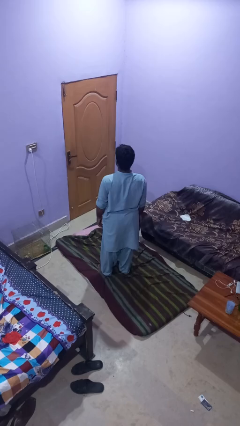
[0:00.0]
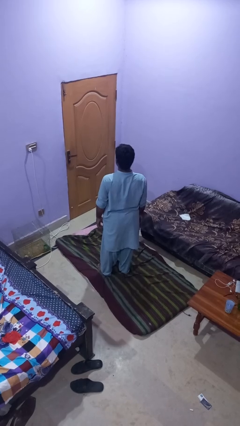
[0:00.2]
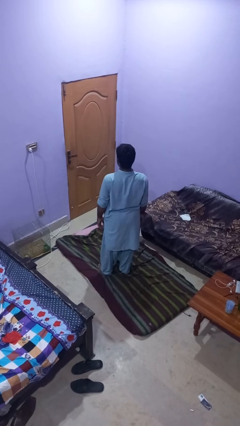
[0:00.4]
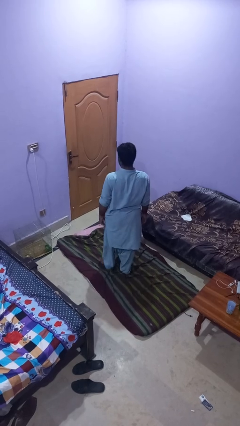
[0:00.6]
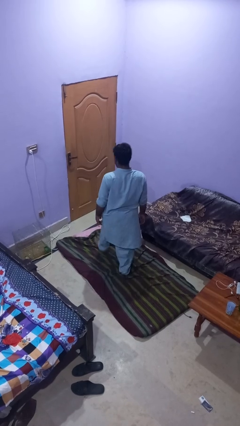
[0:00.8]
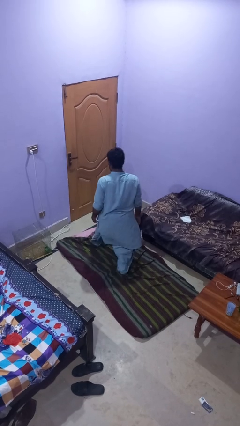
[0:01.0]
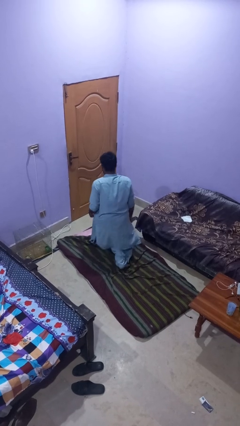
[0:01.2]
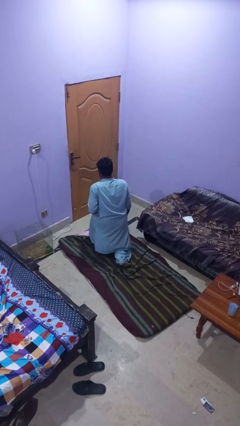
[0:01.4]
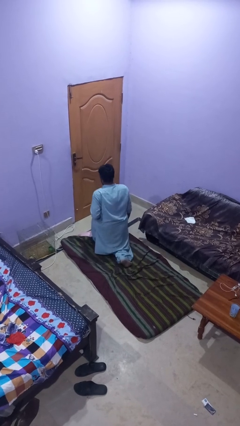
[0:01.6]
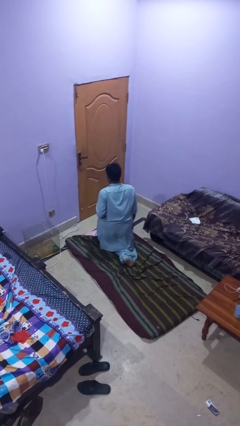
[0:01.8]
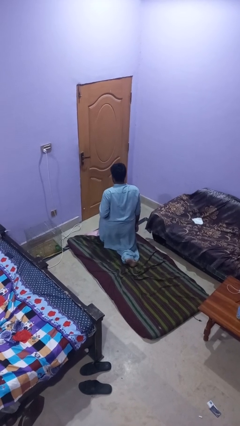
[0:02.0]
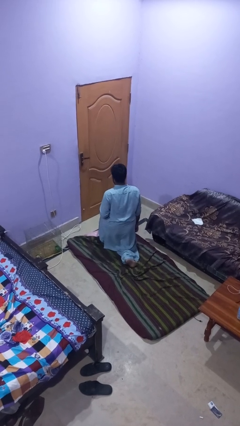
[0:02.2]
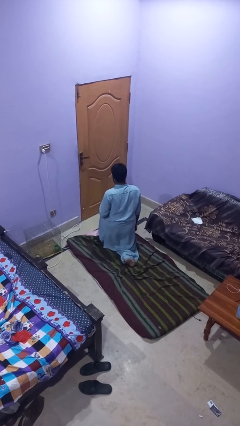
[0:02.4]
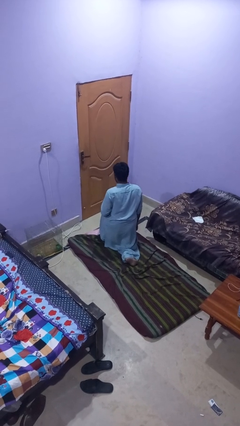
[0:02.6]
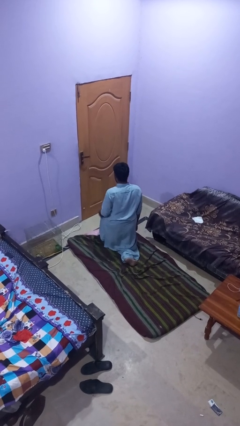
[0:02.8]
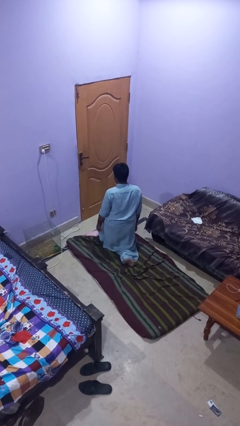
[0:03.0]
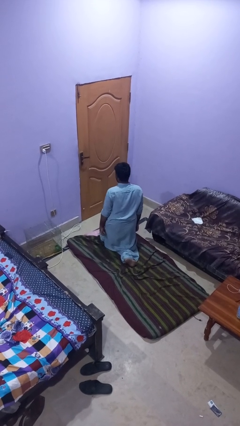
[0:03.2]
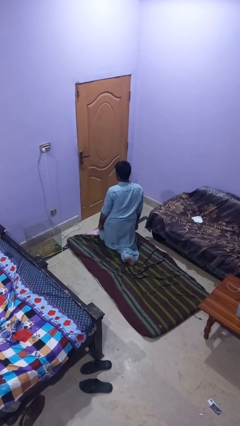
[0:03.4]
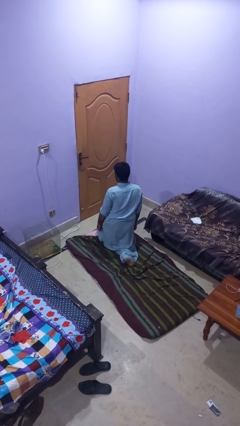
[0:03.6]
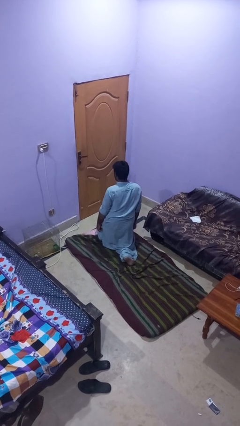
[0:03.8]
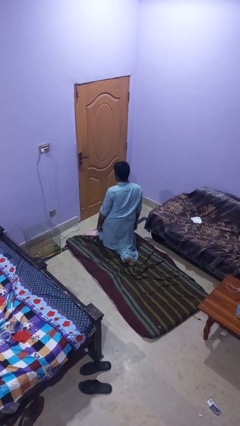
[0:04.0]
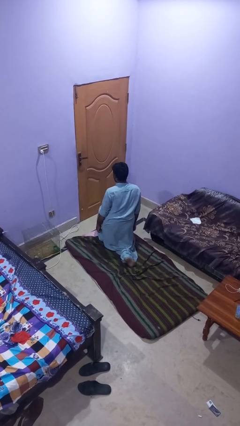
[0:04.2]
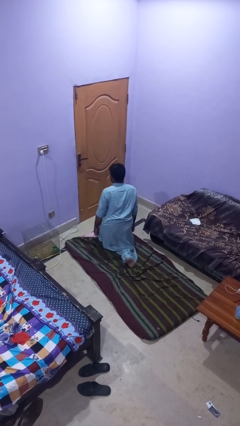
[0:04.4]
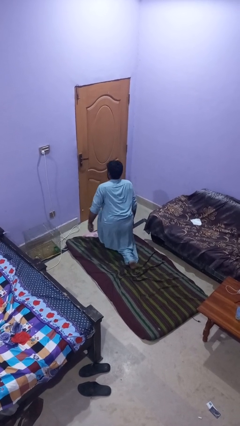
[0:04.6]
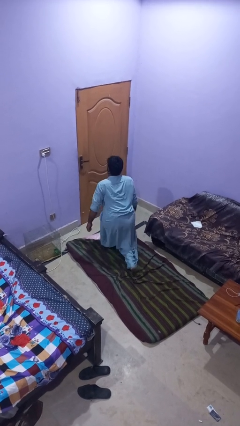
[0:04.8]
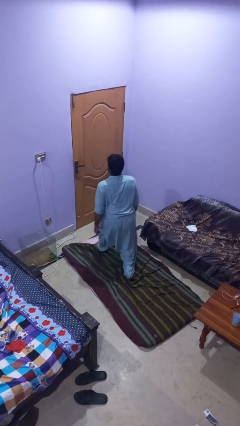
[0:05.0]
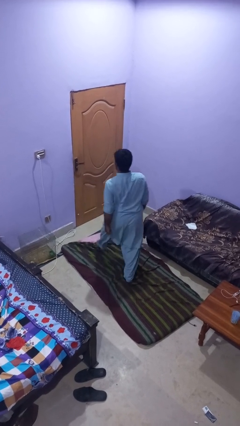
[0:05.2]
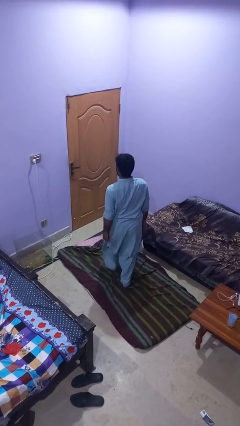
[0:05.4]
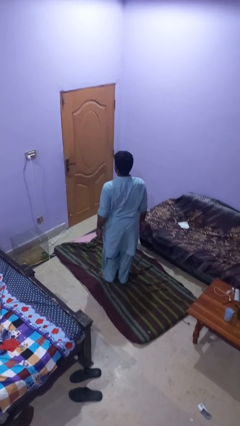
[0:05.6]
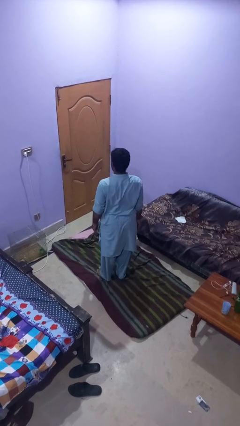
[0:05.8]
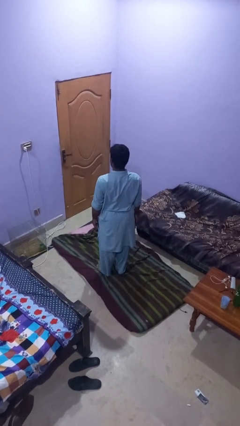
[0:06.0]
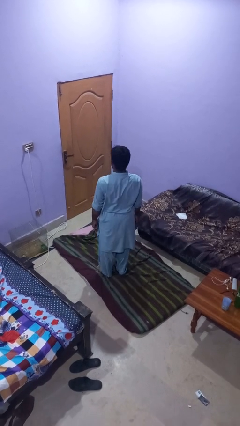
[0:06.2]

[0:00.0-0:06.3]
person exercises with lunges

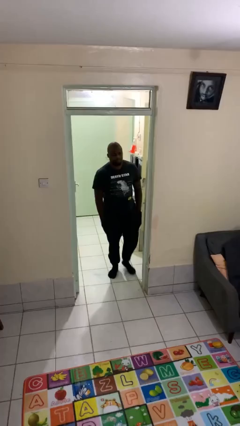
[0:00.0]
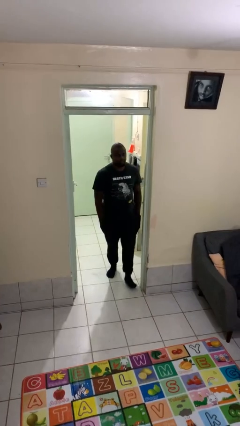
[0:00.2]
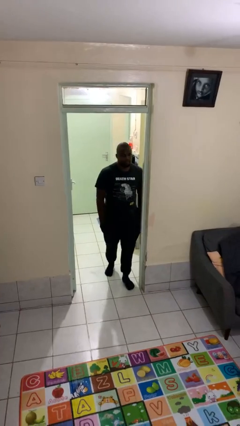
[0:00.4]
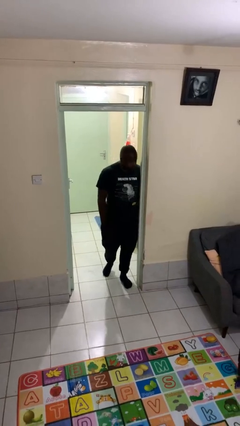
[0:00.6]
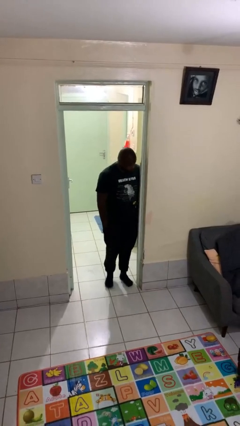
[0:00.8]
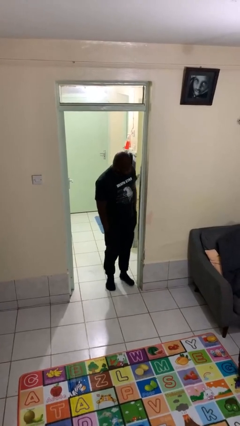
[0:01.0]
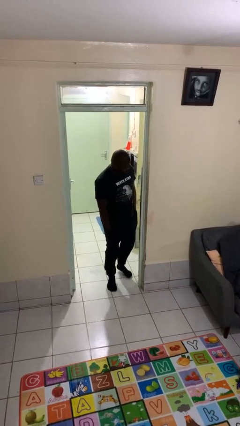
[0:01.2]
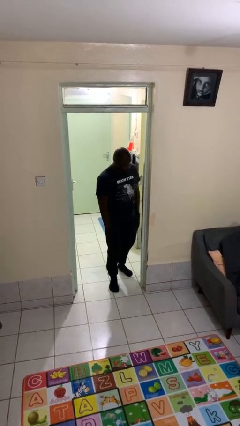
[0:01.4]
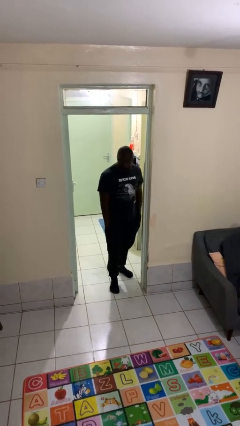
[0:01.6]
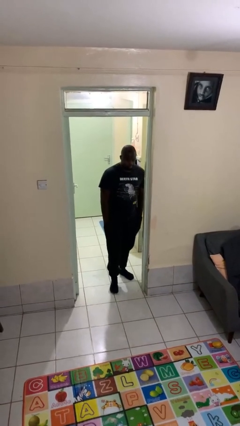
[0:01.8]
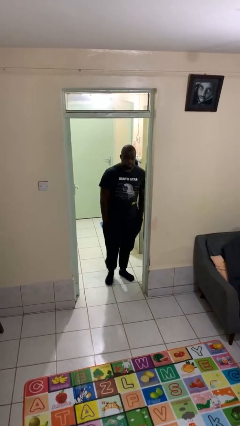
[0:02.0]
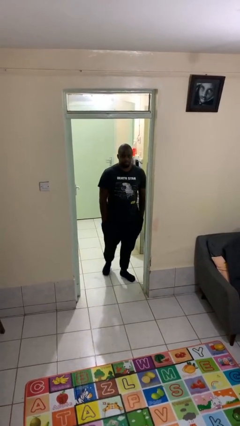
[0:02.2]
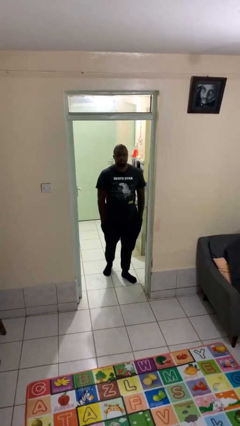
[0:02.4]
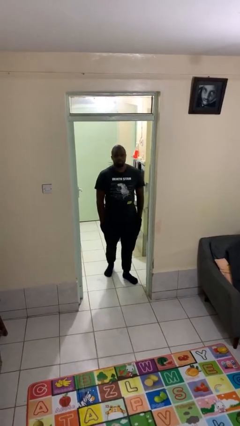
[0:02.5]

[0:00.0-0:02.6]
person bumps into wall

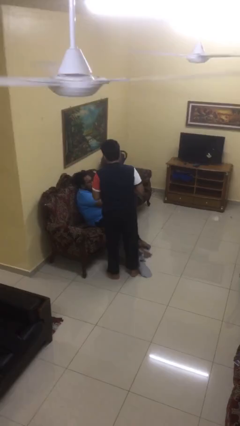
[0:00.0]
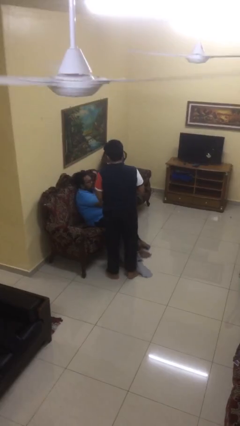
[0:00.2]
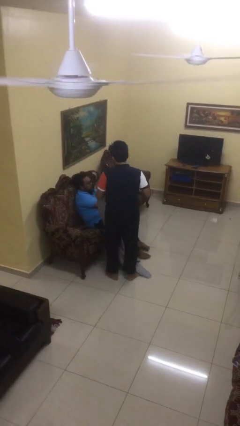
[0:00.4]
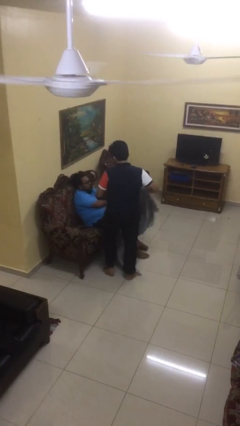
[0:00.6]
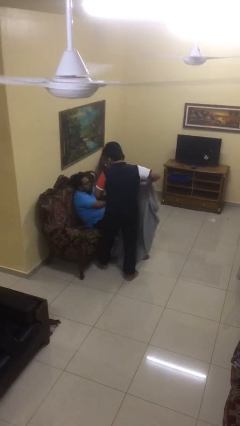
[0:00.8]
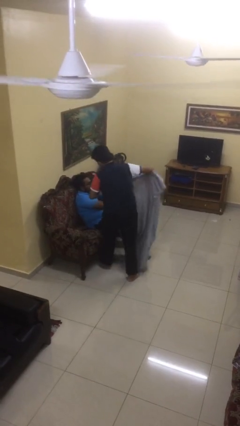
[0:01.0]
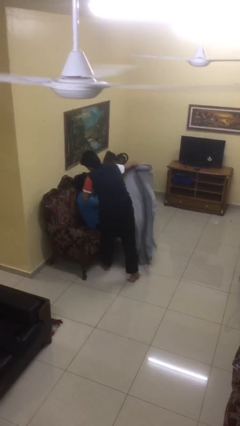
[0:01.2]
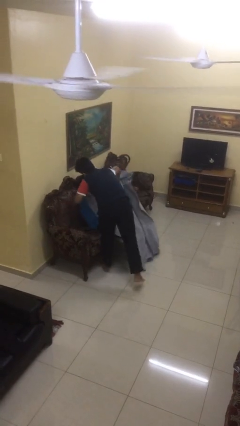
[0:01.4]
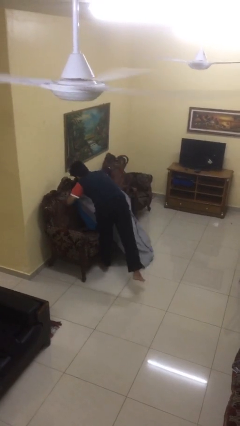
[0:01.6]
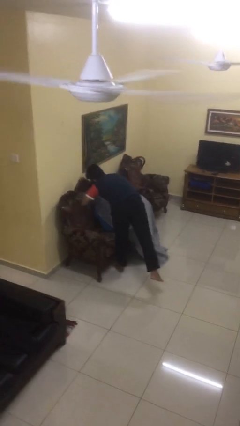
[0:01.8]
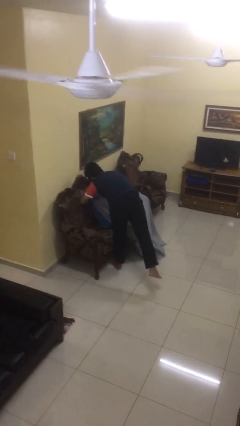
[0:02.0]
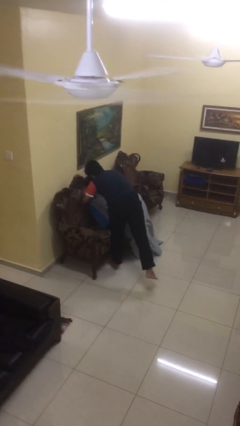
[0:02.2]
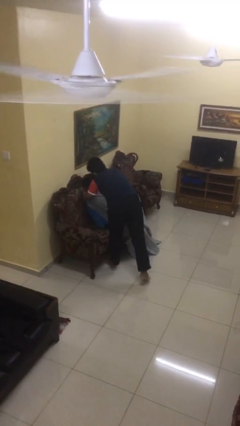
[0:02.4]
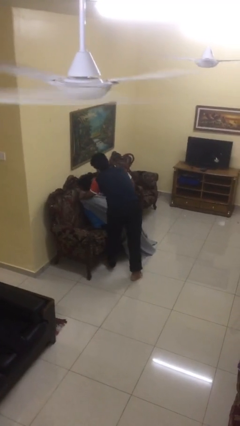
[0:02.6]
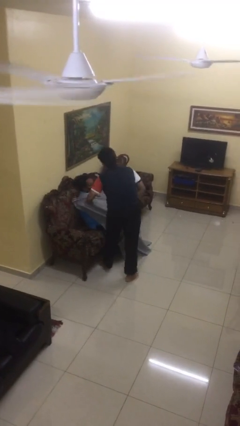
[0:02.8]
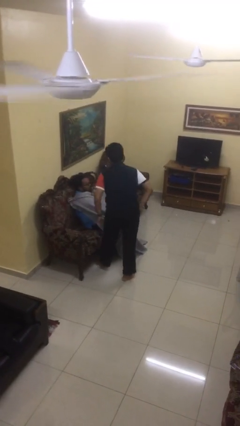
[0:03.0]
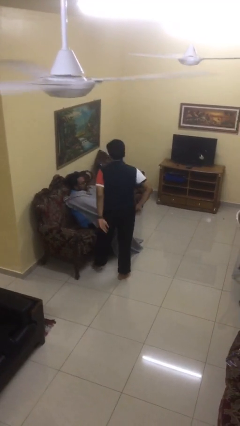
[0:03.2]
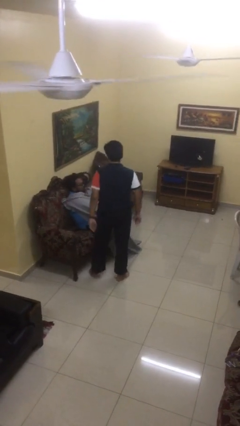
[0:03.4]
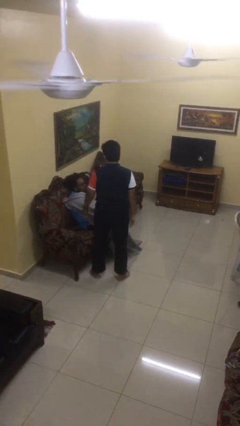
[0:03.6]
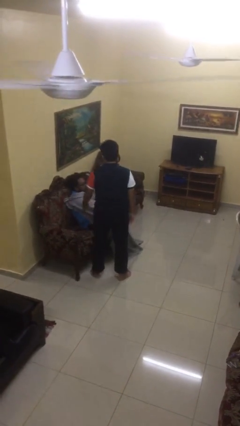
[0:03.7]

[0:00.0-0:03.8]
person covers friend with blanket

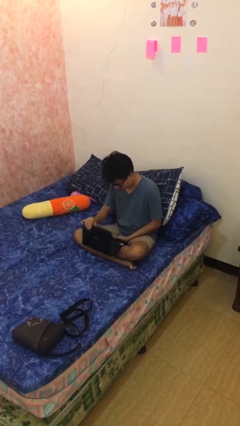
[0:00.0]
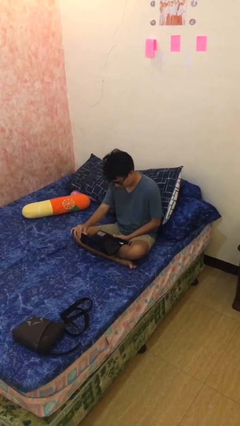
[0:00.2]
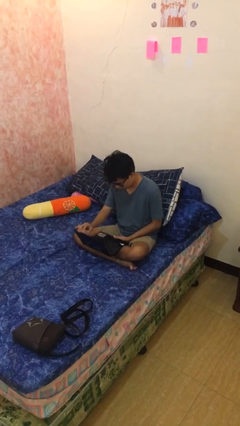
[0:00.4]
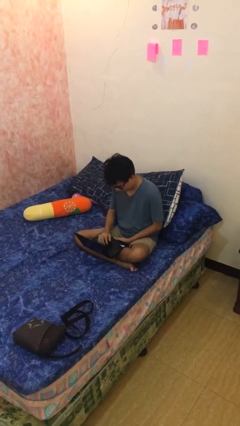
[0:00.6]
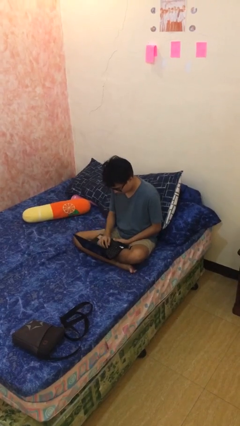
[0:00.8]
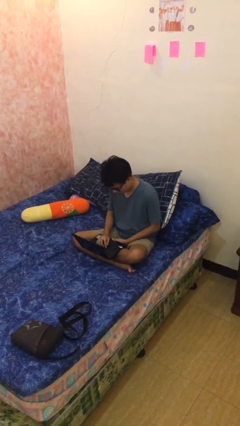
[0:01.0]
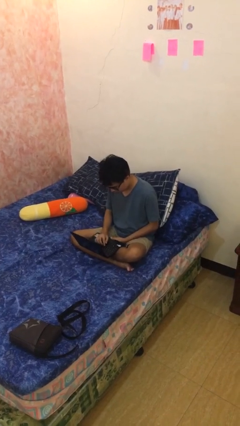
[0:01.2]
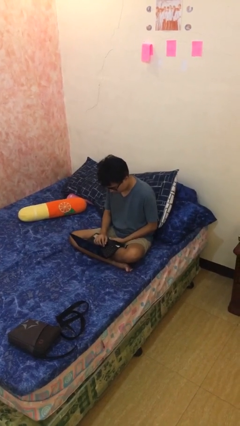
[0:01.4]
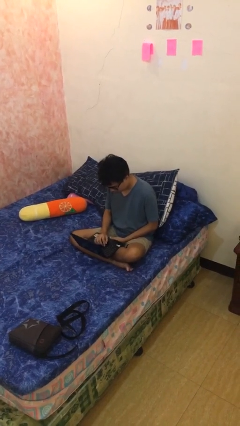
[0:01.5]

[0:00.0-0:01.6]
person interacts with laptop

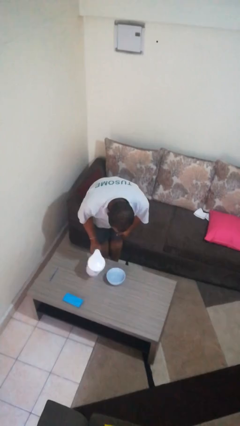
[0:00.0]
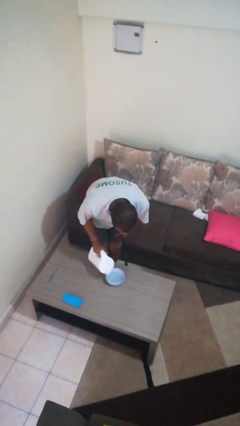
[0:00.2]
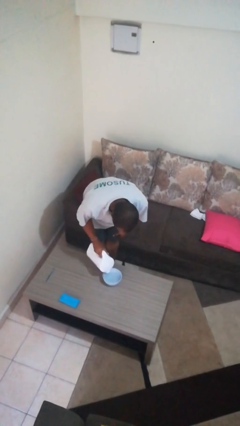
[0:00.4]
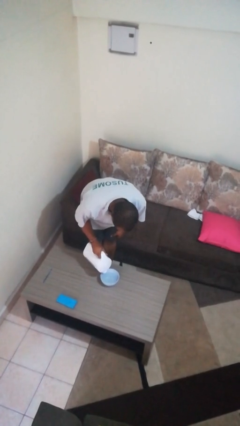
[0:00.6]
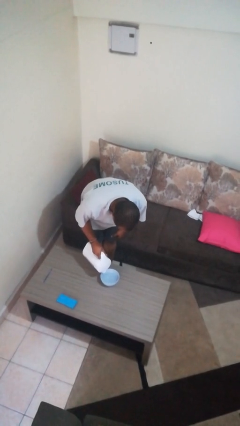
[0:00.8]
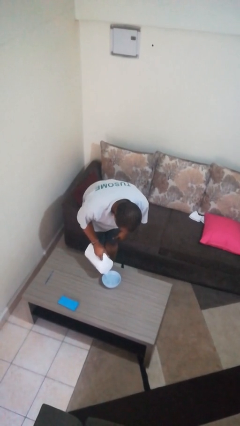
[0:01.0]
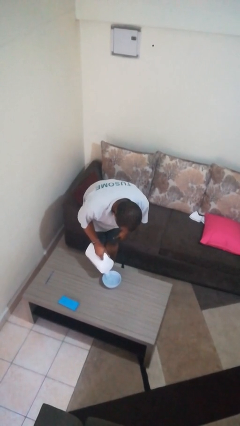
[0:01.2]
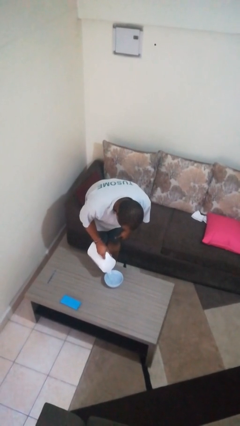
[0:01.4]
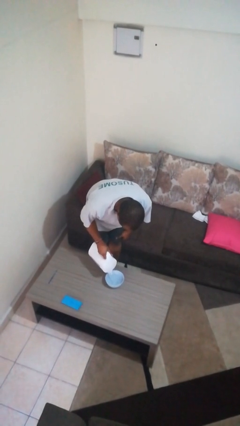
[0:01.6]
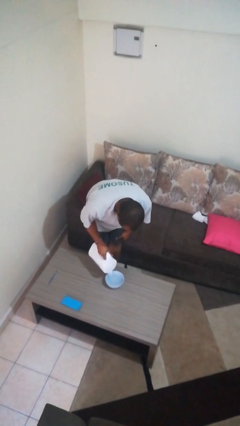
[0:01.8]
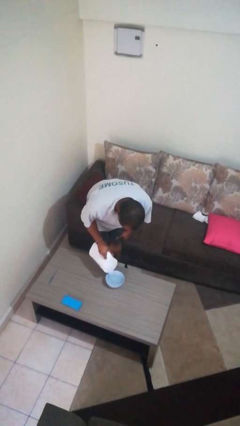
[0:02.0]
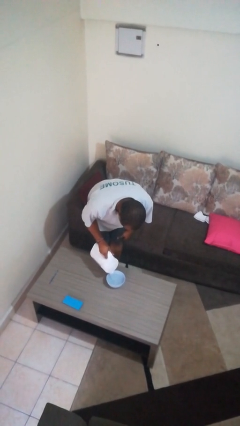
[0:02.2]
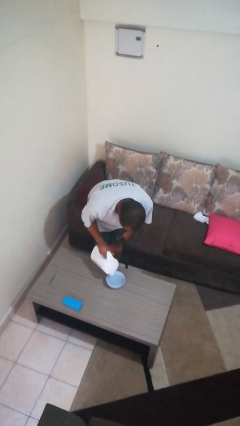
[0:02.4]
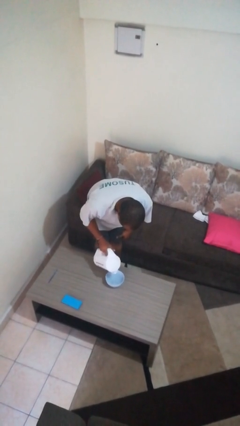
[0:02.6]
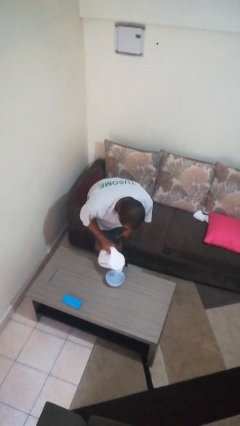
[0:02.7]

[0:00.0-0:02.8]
person pours into bowl

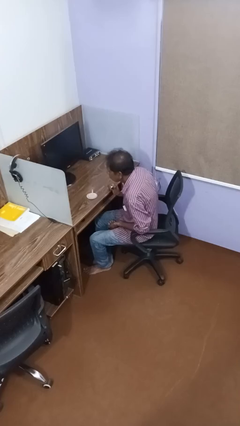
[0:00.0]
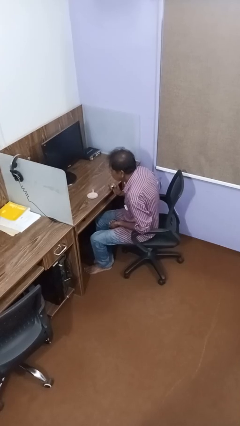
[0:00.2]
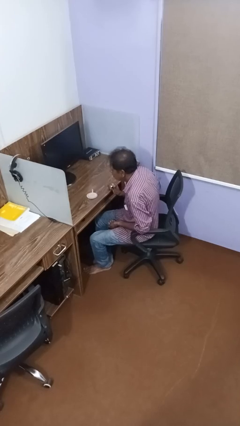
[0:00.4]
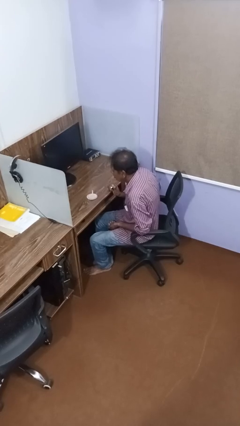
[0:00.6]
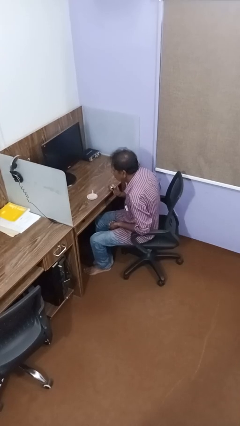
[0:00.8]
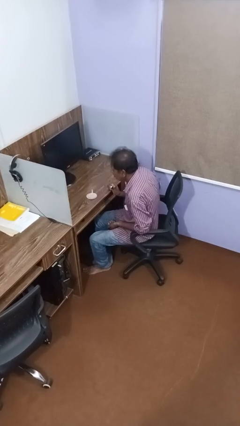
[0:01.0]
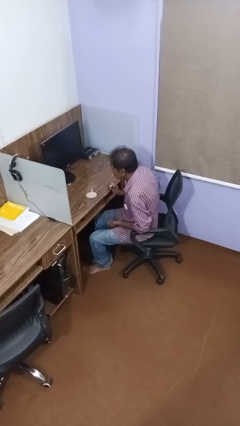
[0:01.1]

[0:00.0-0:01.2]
person extinguishes candle
